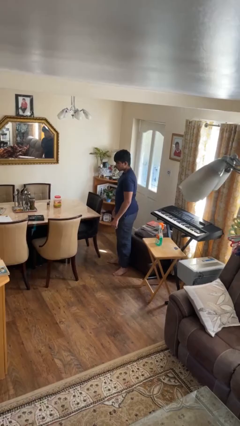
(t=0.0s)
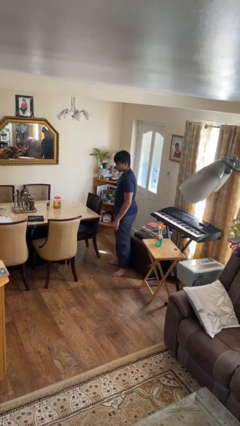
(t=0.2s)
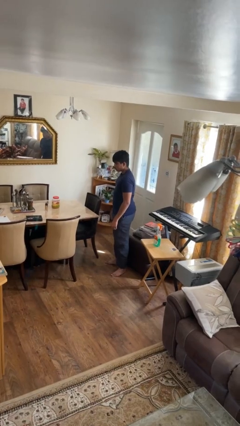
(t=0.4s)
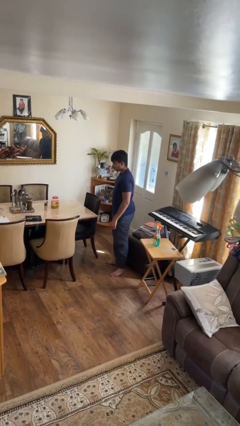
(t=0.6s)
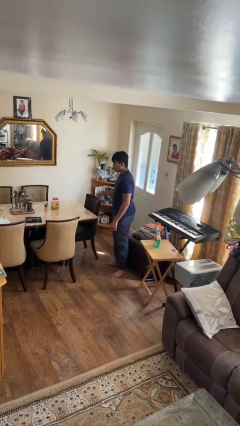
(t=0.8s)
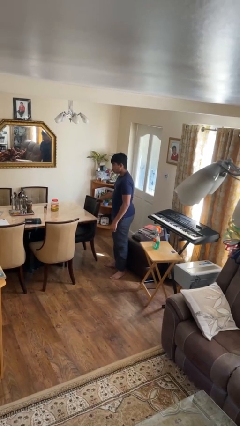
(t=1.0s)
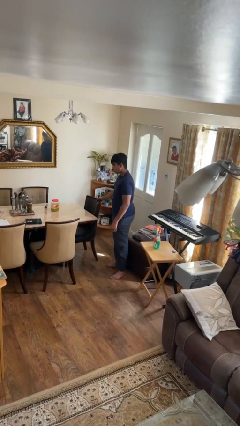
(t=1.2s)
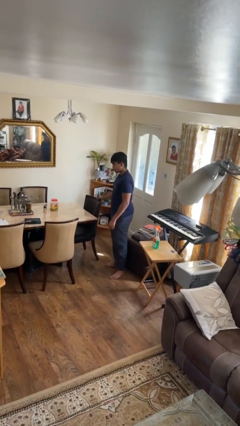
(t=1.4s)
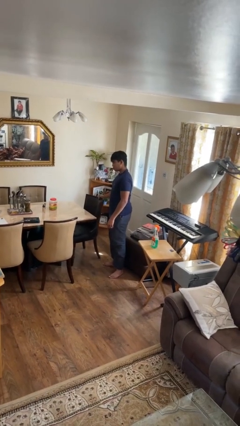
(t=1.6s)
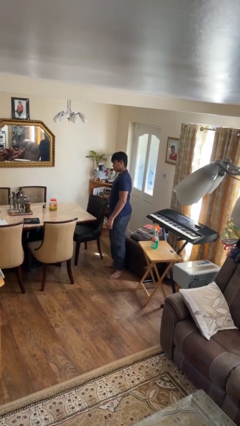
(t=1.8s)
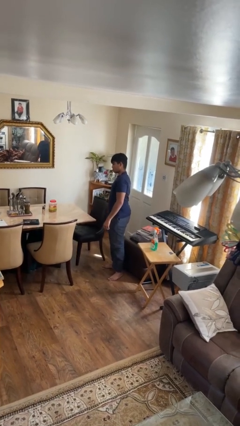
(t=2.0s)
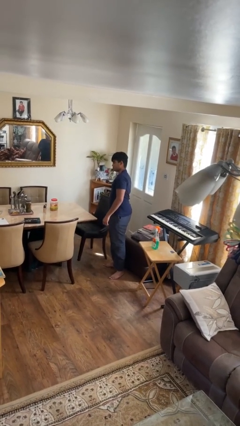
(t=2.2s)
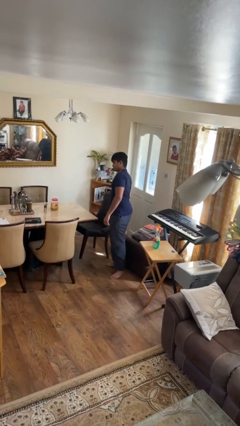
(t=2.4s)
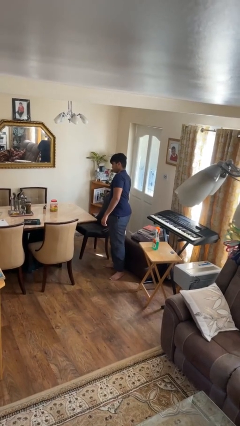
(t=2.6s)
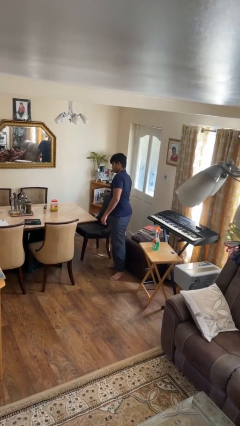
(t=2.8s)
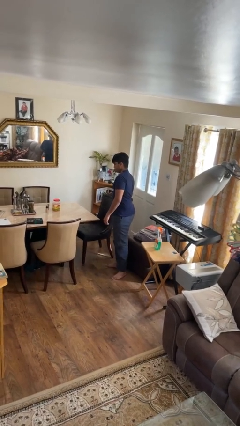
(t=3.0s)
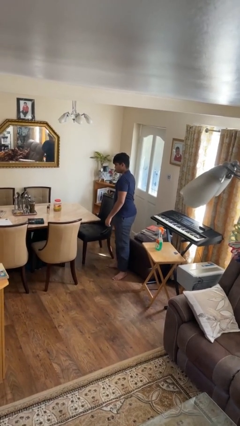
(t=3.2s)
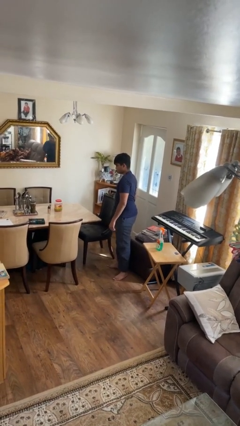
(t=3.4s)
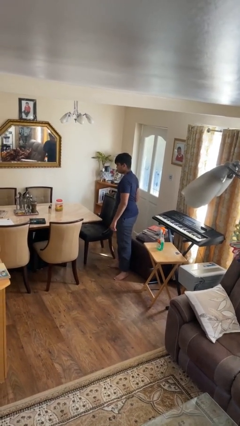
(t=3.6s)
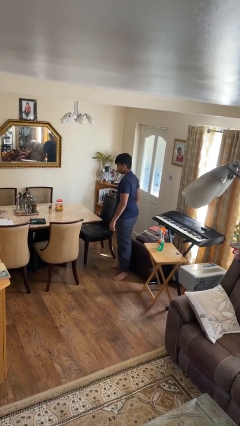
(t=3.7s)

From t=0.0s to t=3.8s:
person pulls out chair

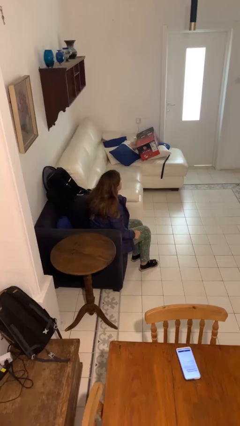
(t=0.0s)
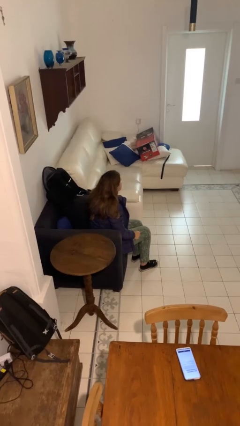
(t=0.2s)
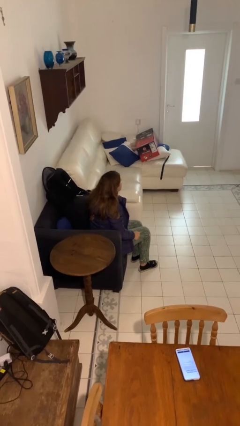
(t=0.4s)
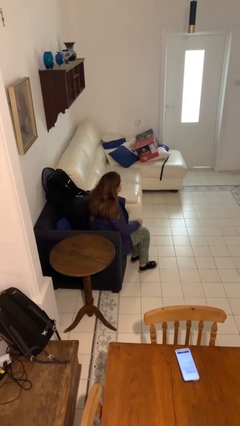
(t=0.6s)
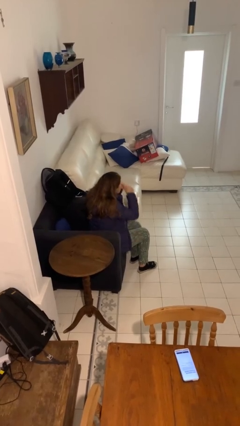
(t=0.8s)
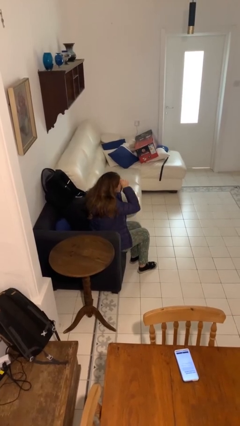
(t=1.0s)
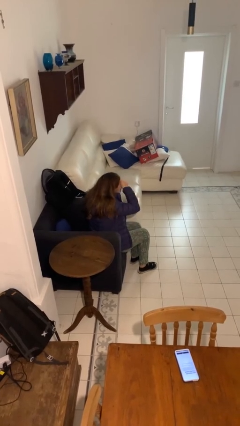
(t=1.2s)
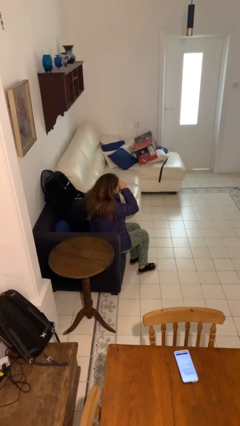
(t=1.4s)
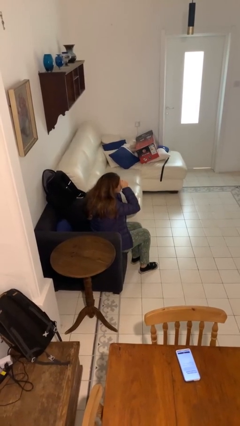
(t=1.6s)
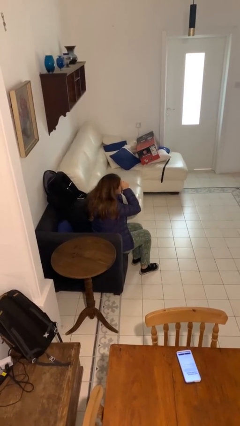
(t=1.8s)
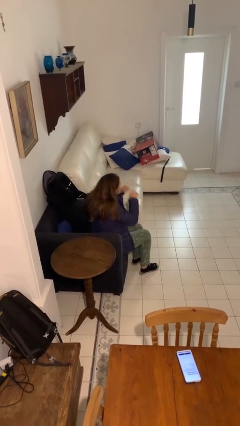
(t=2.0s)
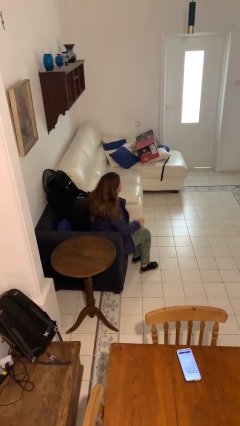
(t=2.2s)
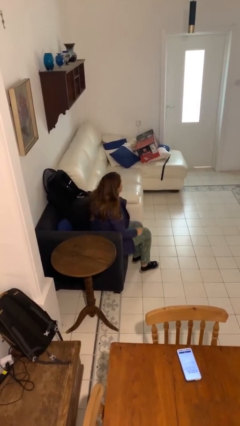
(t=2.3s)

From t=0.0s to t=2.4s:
person rubs eyes

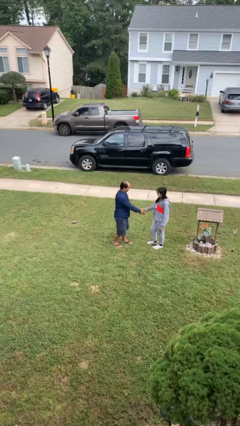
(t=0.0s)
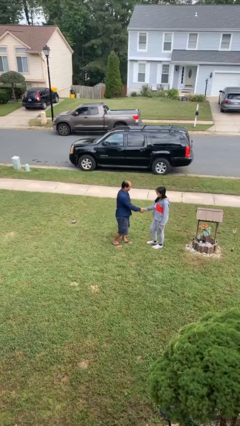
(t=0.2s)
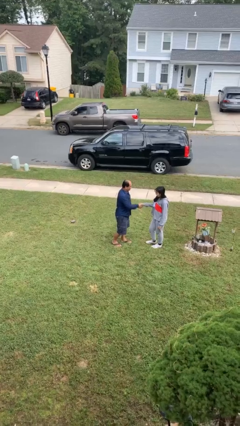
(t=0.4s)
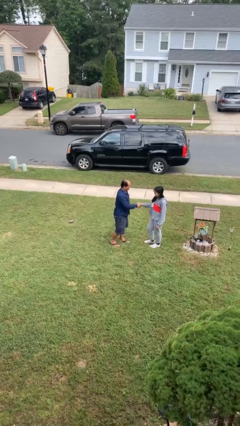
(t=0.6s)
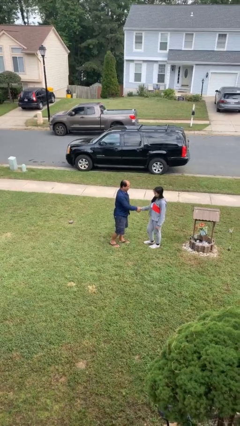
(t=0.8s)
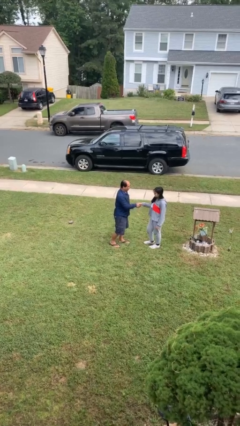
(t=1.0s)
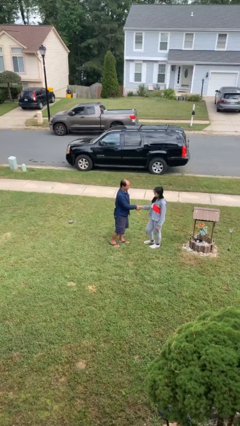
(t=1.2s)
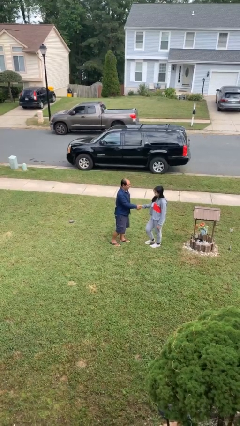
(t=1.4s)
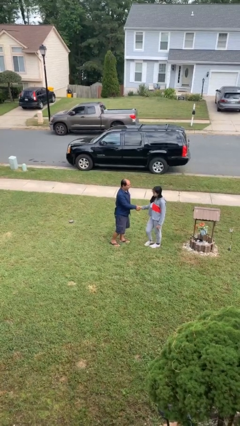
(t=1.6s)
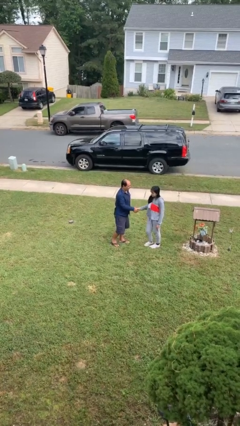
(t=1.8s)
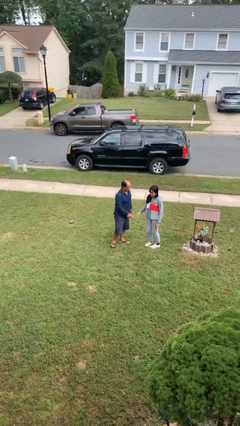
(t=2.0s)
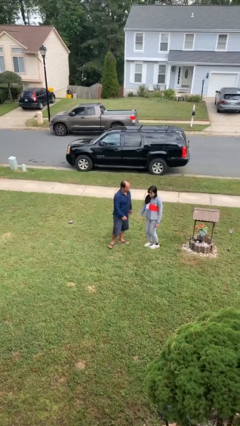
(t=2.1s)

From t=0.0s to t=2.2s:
person shakes hand

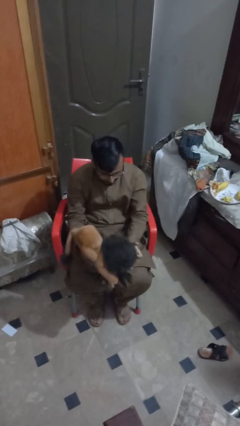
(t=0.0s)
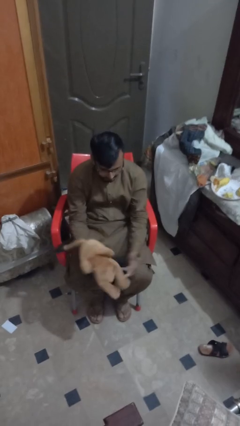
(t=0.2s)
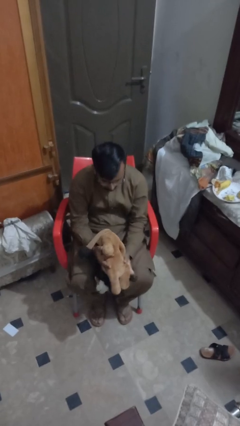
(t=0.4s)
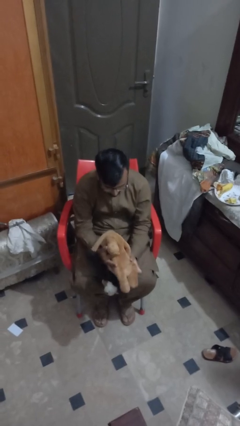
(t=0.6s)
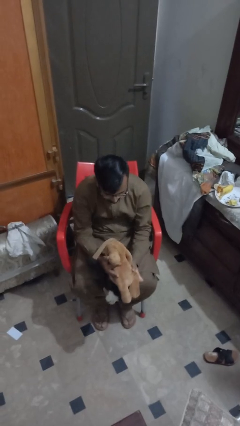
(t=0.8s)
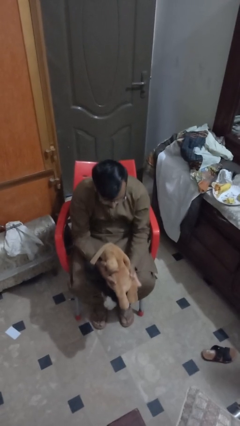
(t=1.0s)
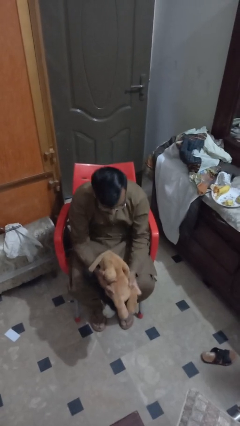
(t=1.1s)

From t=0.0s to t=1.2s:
person catches dropped object

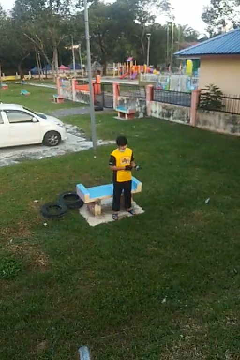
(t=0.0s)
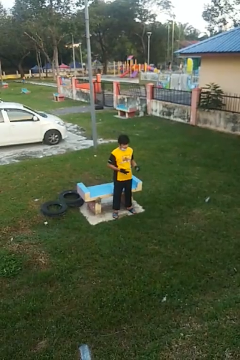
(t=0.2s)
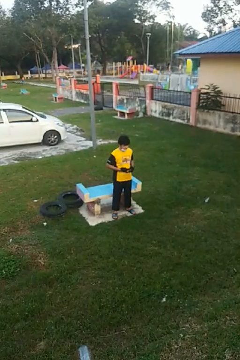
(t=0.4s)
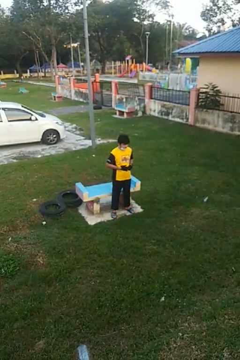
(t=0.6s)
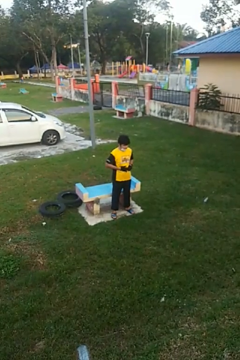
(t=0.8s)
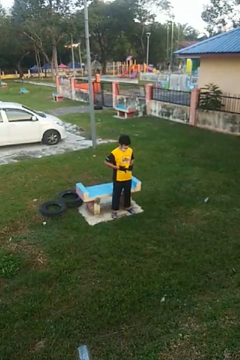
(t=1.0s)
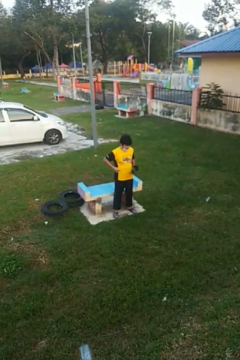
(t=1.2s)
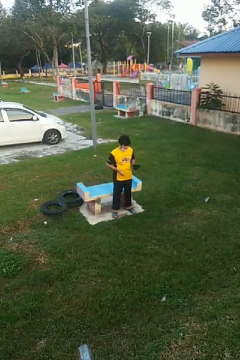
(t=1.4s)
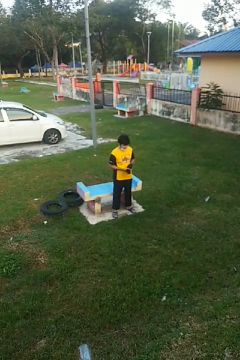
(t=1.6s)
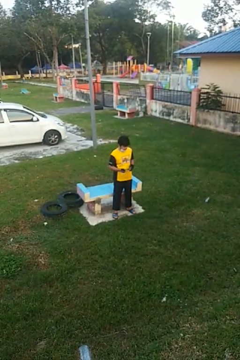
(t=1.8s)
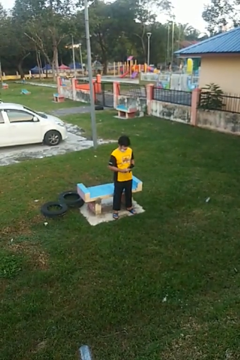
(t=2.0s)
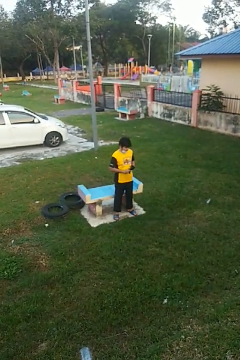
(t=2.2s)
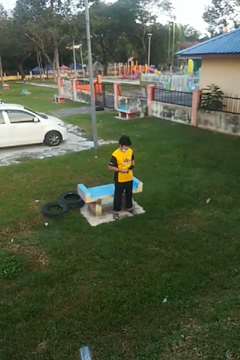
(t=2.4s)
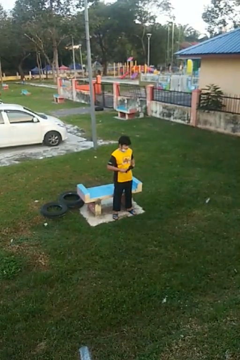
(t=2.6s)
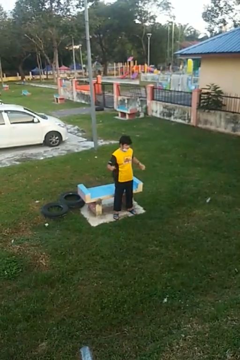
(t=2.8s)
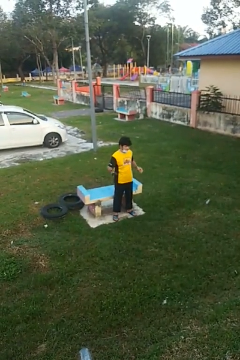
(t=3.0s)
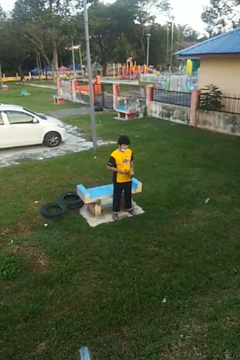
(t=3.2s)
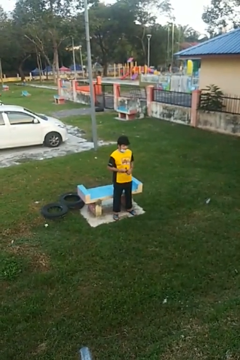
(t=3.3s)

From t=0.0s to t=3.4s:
person takes off gloves

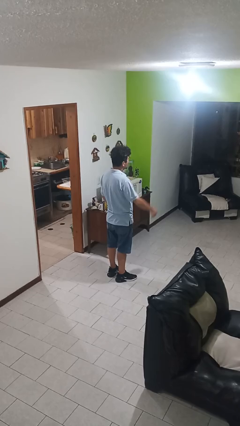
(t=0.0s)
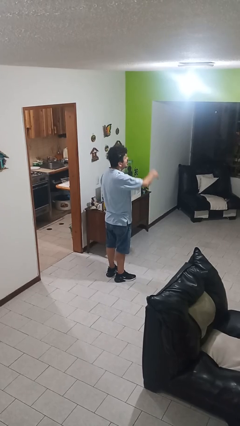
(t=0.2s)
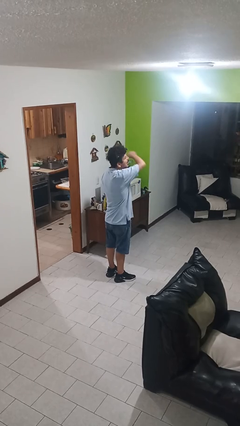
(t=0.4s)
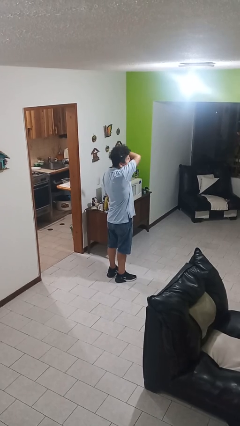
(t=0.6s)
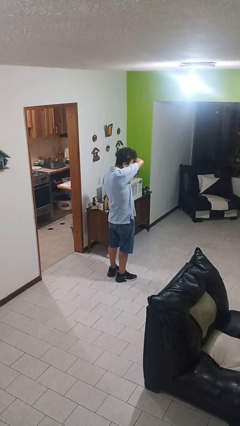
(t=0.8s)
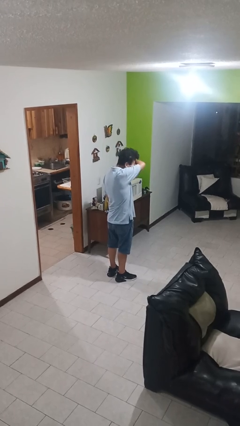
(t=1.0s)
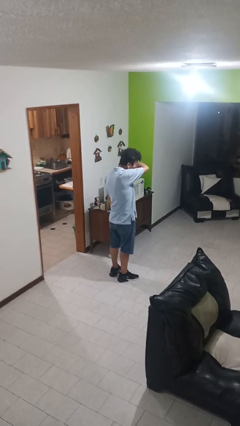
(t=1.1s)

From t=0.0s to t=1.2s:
person sneezes into arm

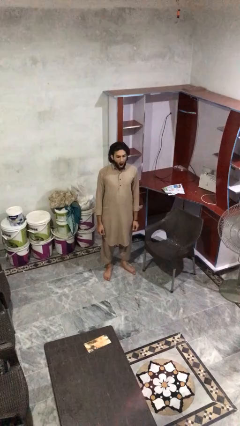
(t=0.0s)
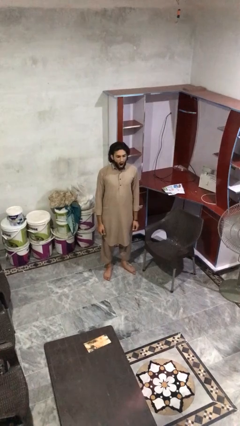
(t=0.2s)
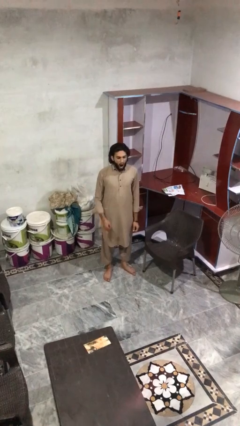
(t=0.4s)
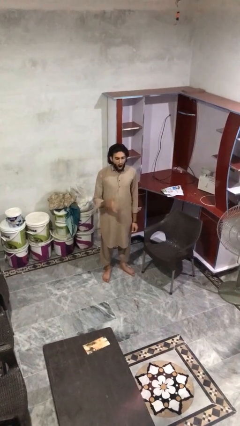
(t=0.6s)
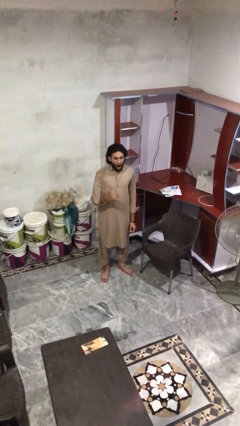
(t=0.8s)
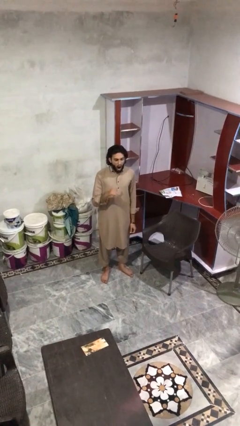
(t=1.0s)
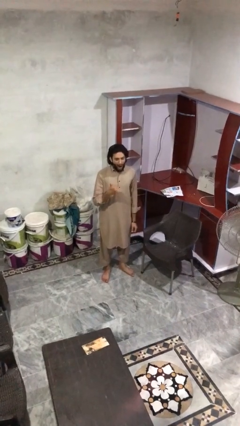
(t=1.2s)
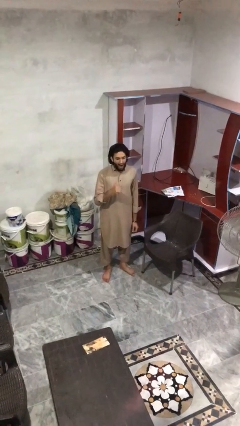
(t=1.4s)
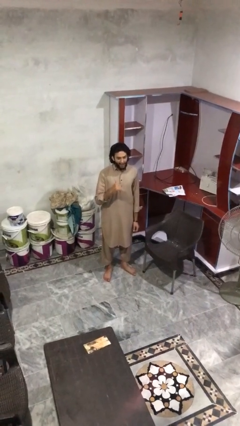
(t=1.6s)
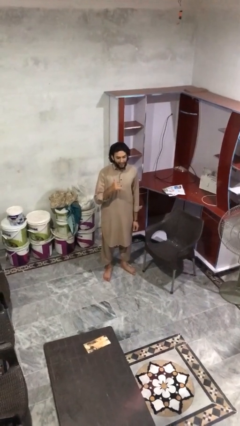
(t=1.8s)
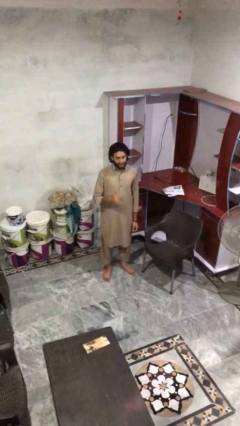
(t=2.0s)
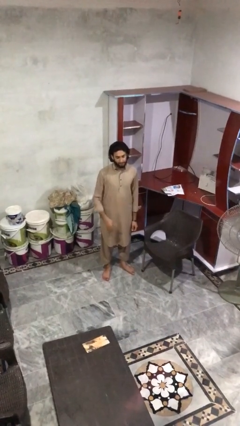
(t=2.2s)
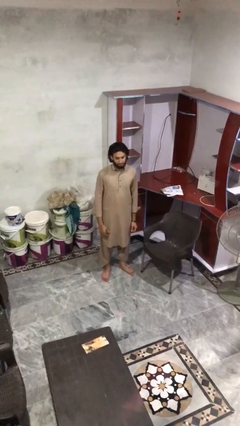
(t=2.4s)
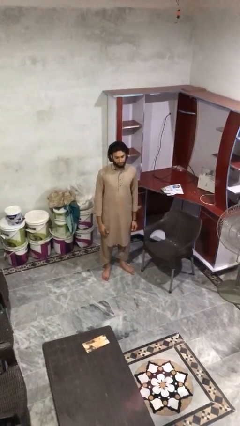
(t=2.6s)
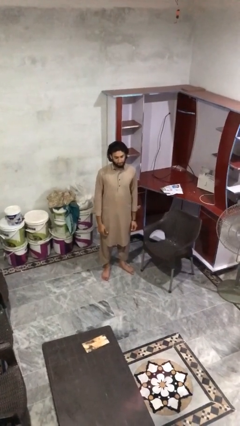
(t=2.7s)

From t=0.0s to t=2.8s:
person gestures hang loose

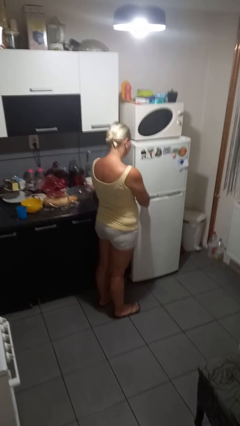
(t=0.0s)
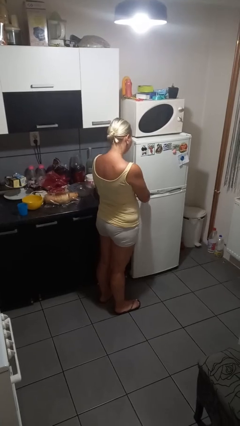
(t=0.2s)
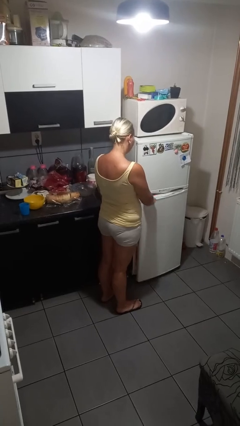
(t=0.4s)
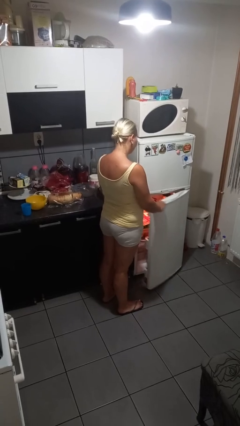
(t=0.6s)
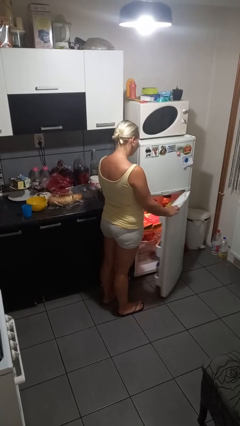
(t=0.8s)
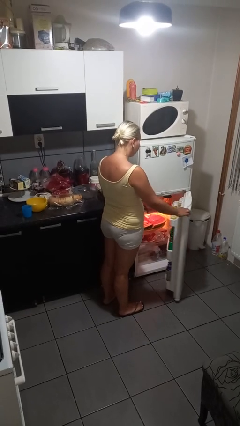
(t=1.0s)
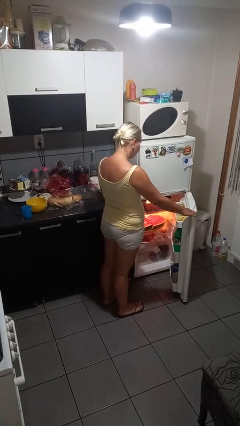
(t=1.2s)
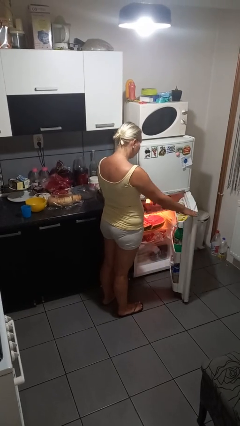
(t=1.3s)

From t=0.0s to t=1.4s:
person opens refrigerator
